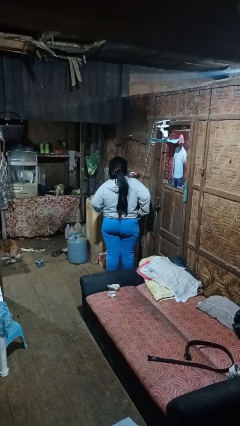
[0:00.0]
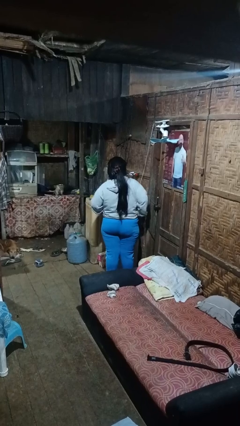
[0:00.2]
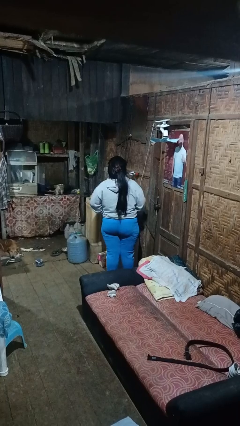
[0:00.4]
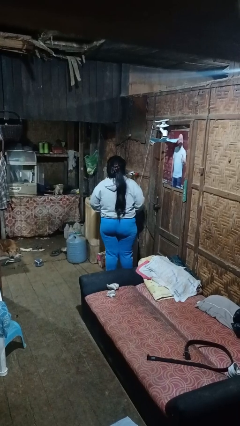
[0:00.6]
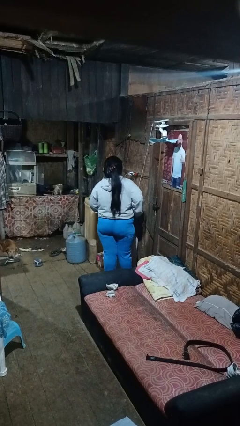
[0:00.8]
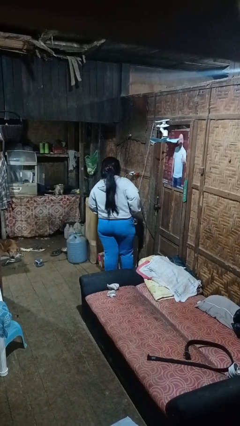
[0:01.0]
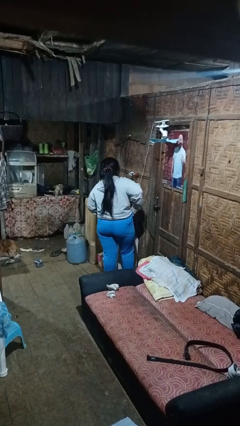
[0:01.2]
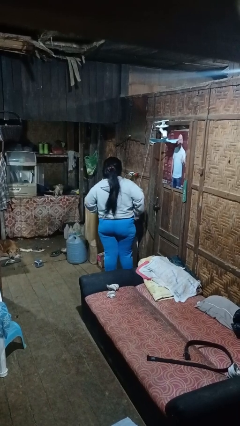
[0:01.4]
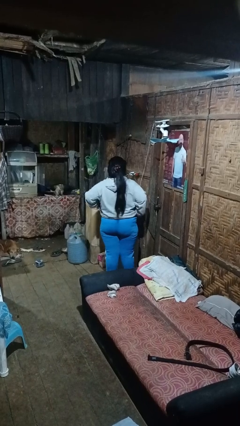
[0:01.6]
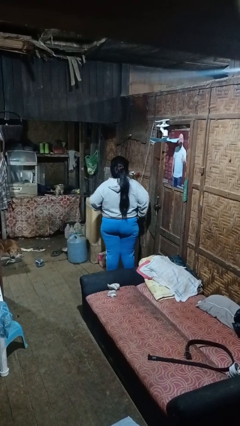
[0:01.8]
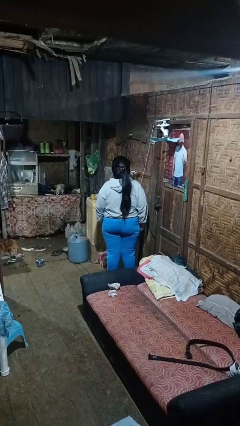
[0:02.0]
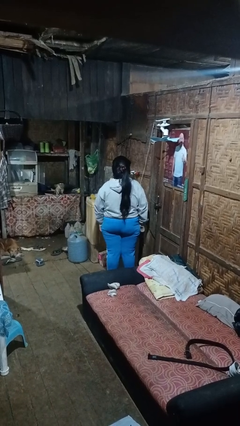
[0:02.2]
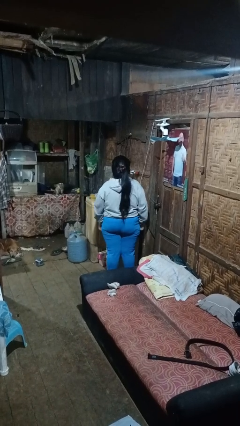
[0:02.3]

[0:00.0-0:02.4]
person hikes up pants

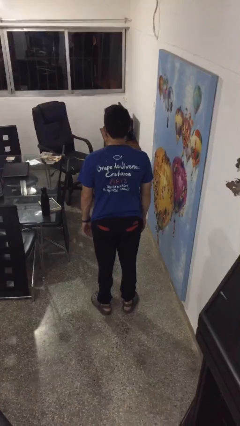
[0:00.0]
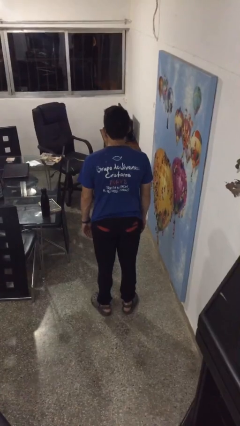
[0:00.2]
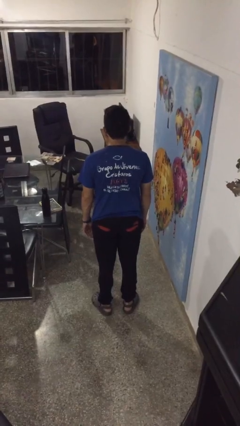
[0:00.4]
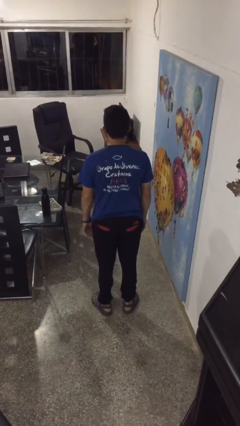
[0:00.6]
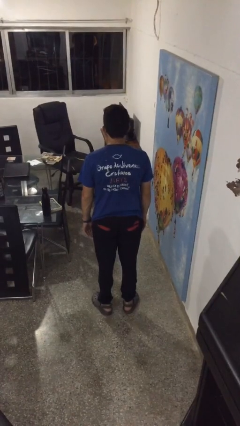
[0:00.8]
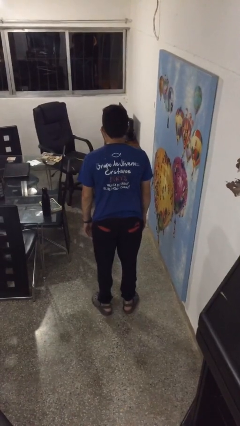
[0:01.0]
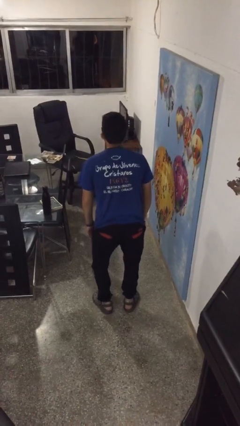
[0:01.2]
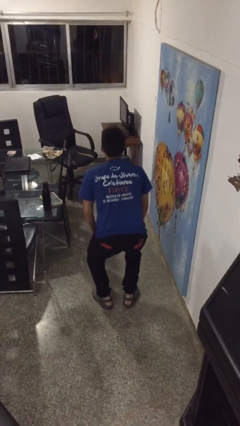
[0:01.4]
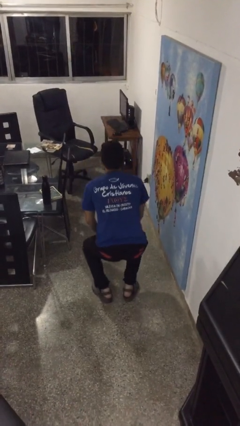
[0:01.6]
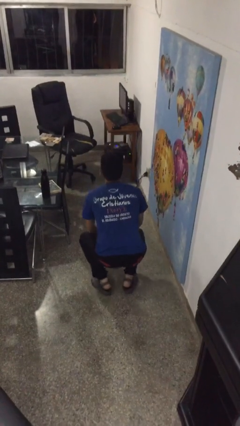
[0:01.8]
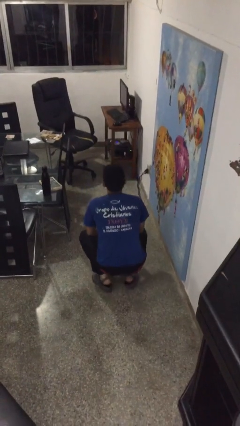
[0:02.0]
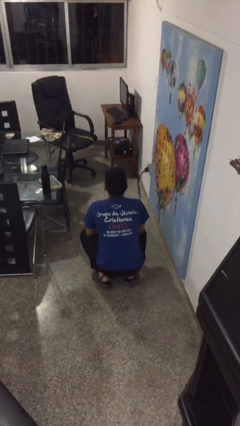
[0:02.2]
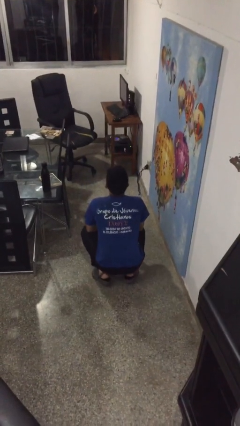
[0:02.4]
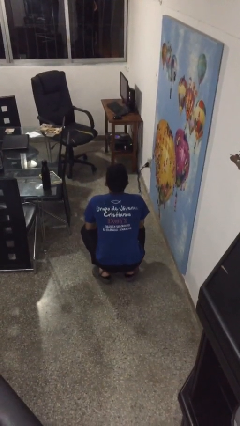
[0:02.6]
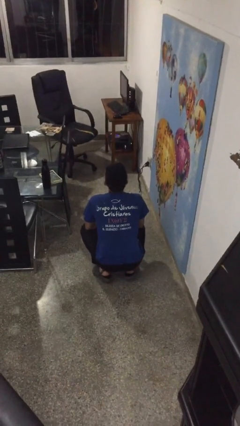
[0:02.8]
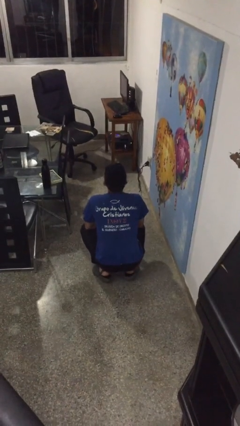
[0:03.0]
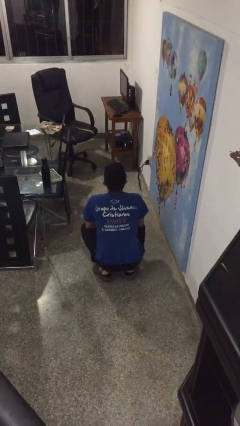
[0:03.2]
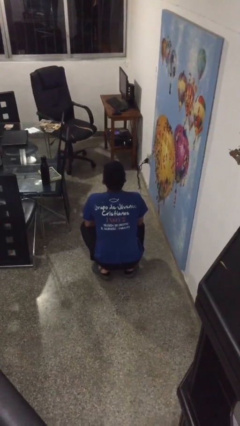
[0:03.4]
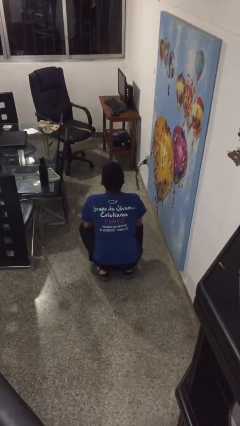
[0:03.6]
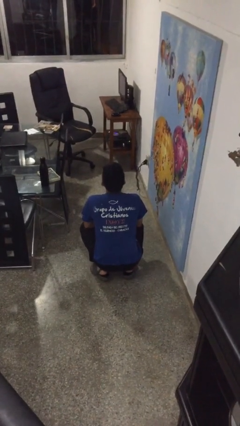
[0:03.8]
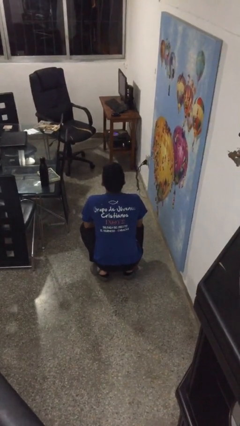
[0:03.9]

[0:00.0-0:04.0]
person squats

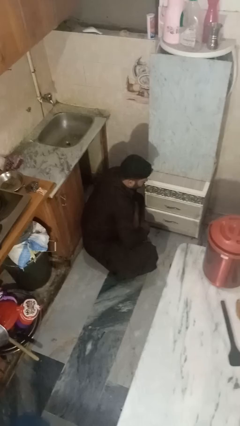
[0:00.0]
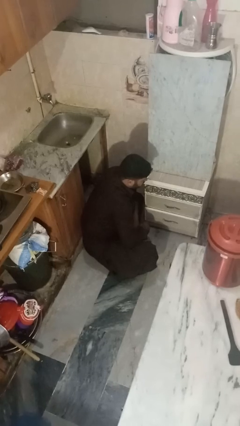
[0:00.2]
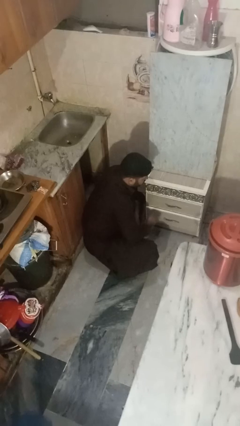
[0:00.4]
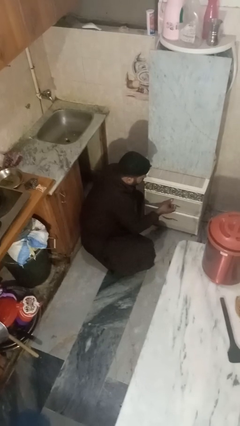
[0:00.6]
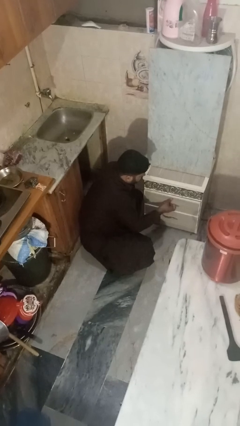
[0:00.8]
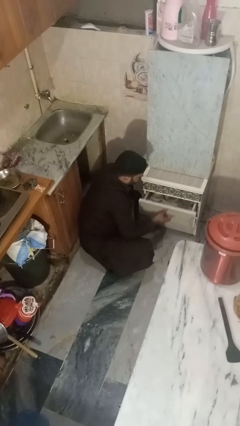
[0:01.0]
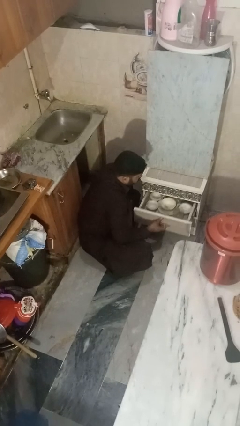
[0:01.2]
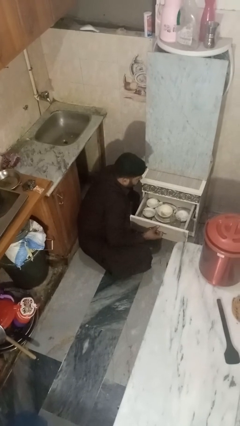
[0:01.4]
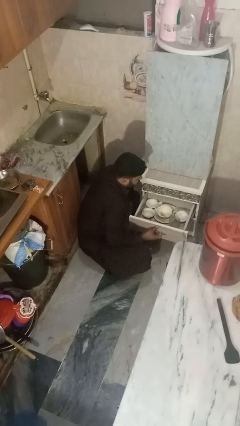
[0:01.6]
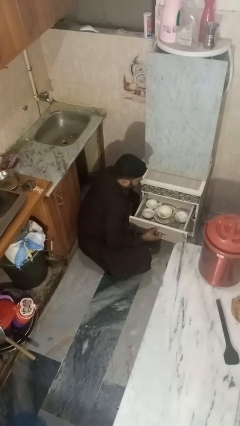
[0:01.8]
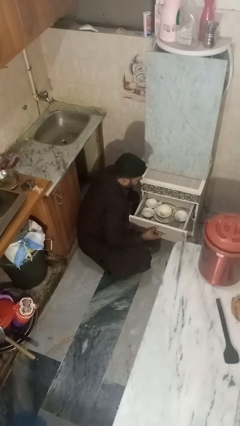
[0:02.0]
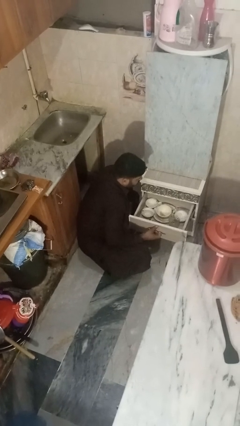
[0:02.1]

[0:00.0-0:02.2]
person opens kitchen drawer

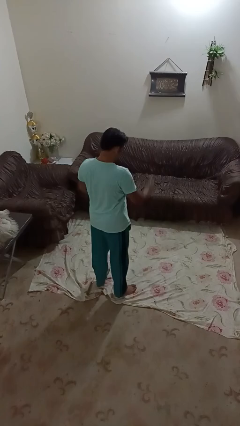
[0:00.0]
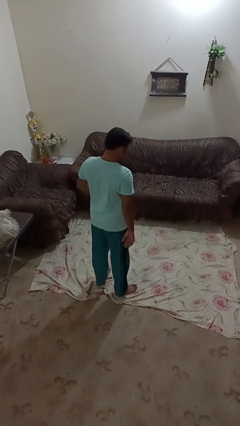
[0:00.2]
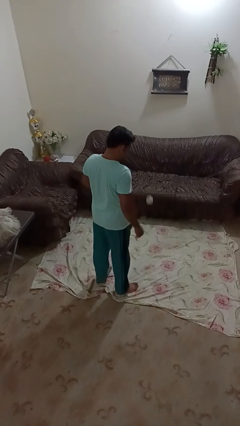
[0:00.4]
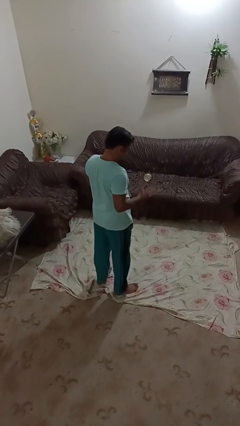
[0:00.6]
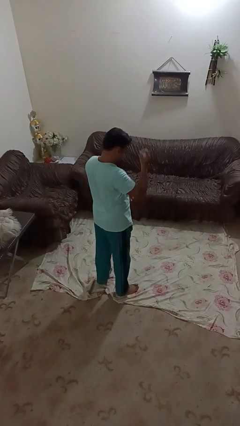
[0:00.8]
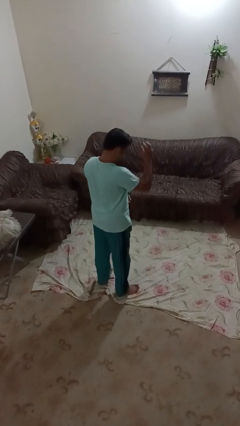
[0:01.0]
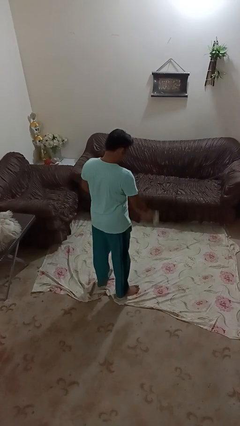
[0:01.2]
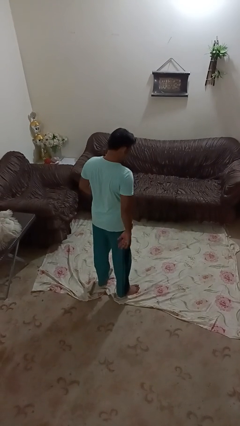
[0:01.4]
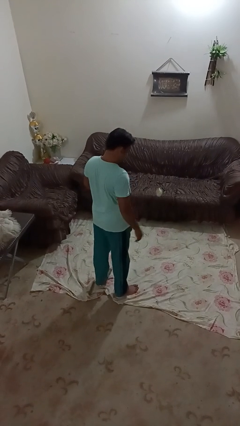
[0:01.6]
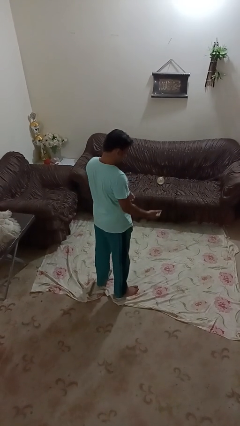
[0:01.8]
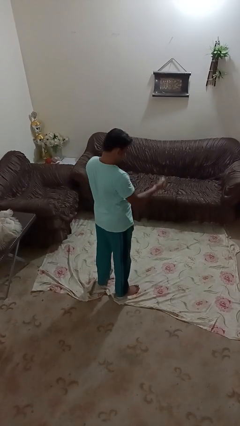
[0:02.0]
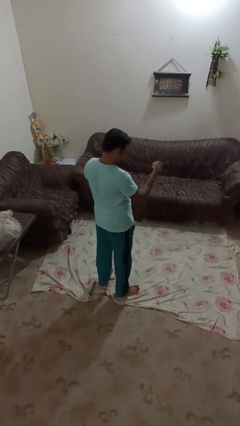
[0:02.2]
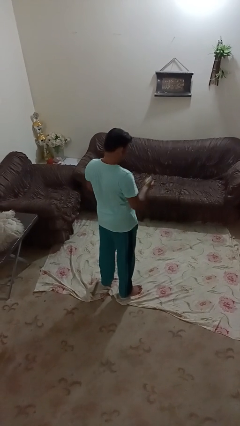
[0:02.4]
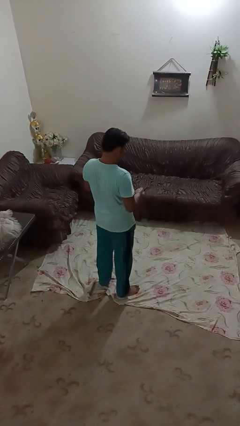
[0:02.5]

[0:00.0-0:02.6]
person bounces ball on floor

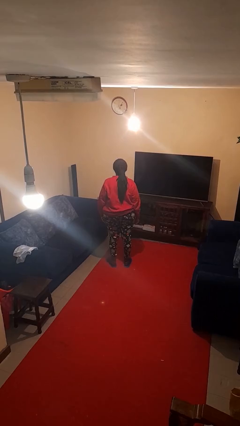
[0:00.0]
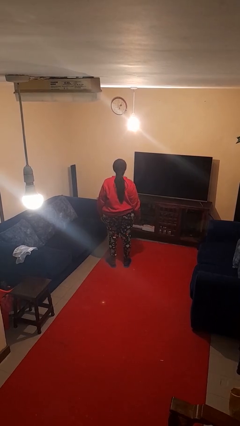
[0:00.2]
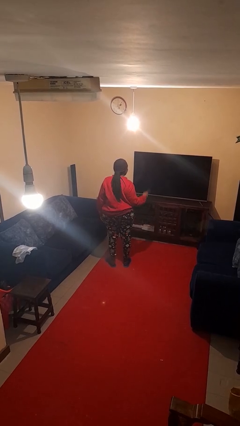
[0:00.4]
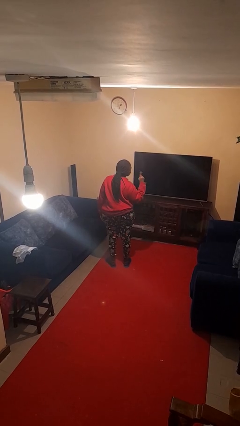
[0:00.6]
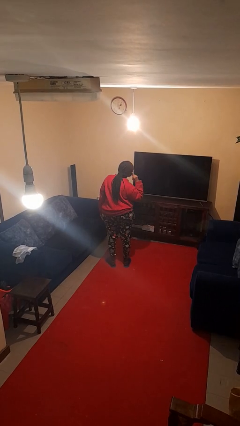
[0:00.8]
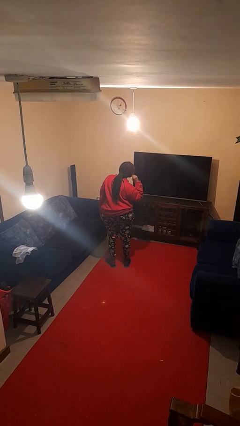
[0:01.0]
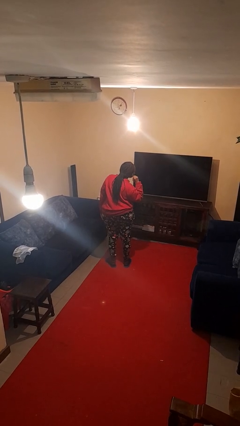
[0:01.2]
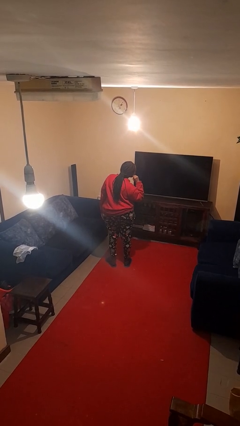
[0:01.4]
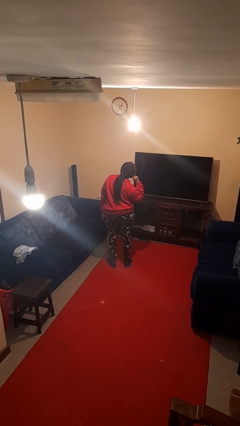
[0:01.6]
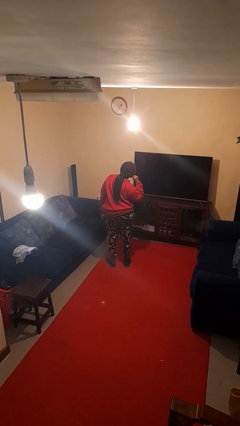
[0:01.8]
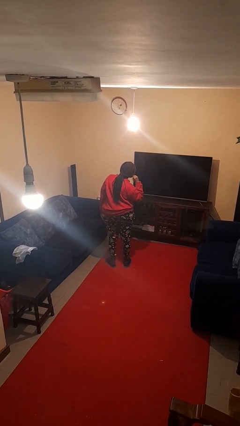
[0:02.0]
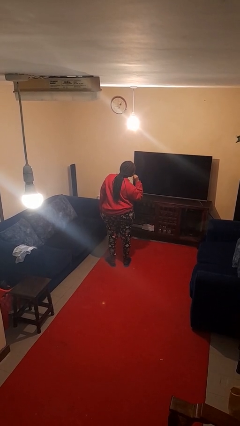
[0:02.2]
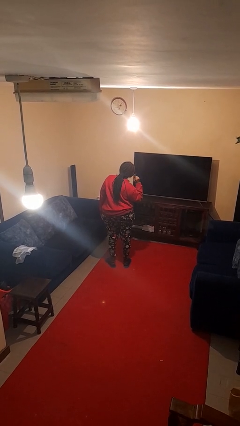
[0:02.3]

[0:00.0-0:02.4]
person gestures listen closely

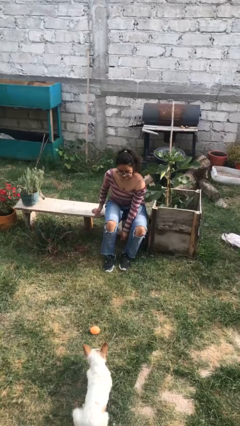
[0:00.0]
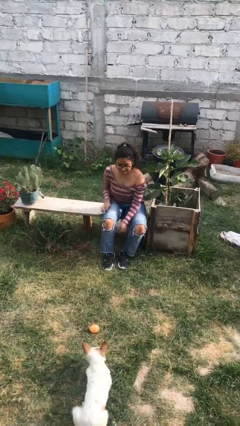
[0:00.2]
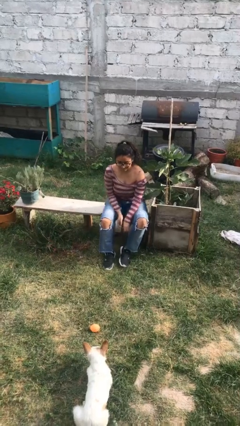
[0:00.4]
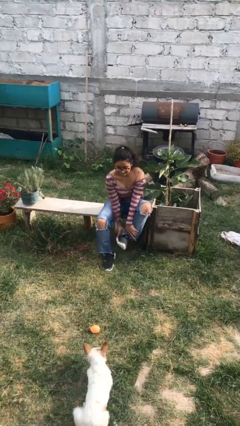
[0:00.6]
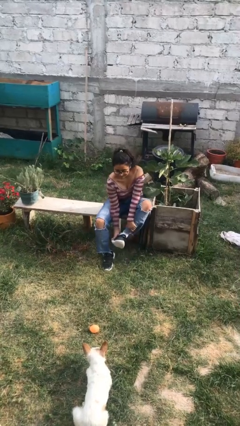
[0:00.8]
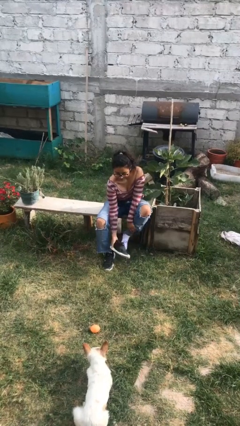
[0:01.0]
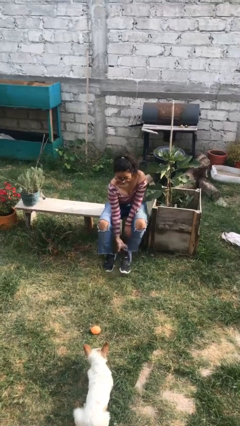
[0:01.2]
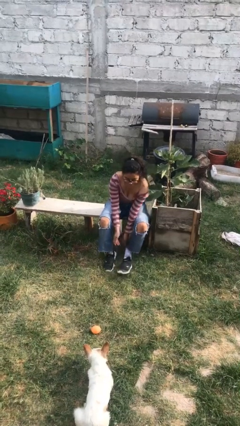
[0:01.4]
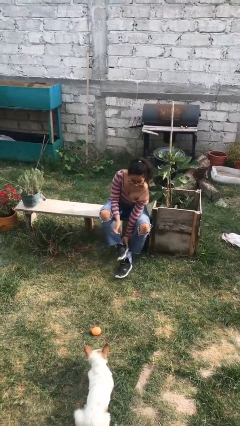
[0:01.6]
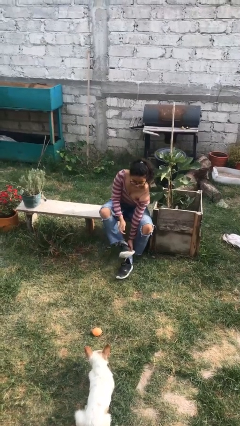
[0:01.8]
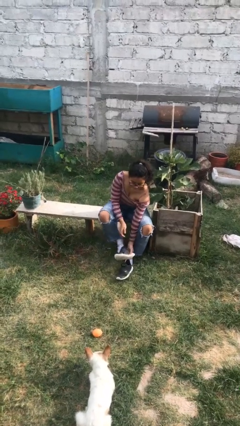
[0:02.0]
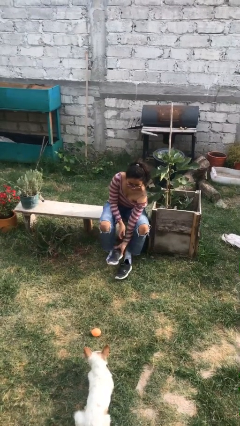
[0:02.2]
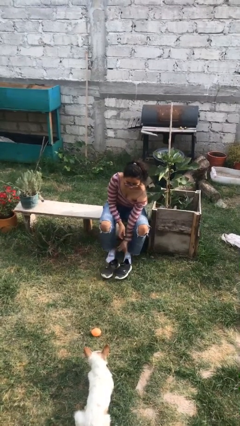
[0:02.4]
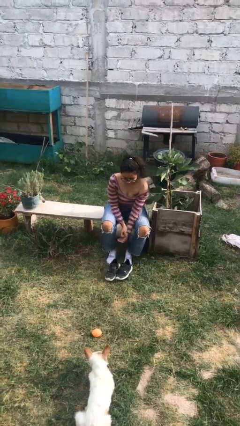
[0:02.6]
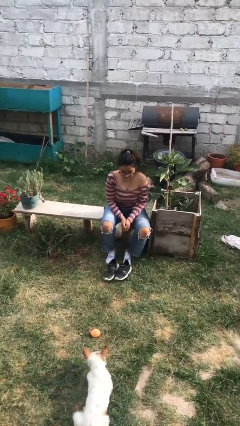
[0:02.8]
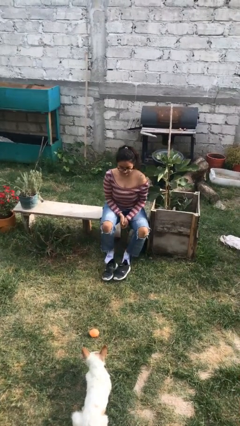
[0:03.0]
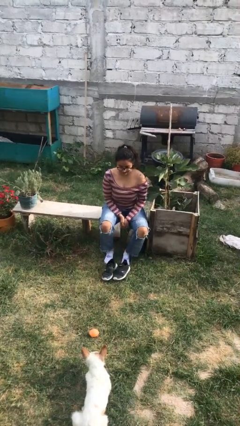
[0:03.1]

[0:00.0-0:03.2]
person takes off shoes

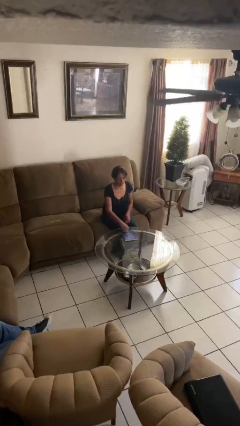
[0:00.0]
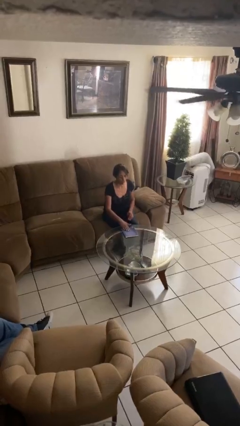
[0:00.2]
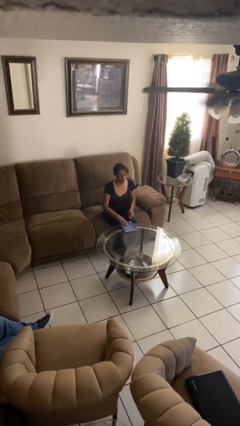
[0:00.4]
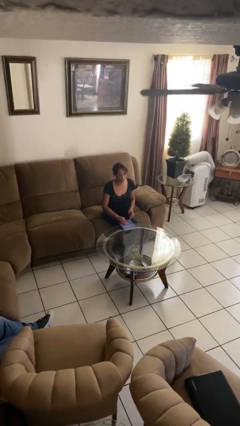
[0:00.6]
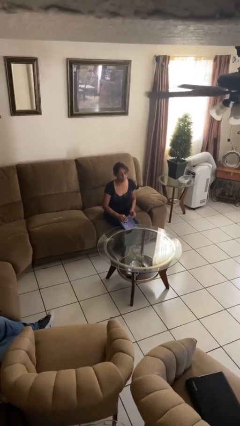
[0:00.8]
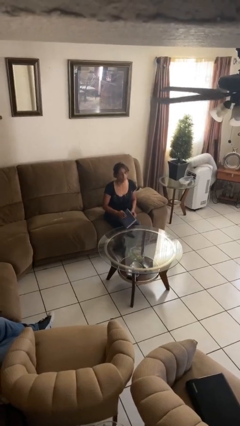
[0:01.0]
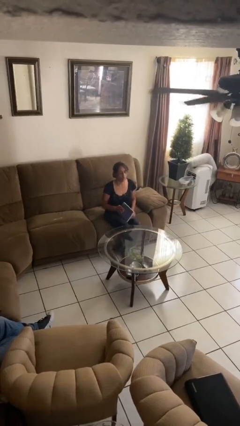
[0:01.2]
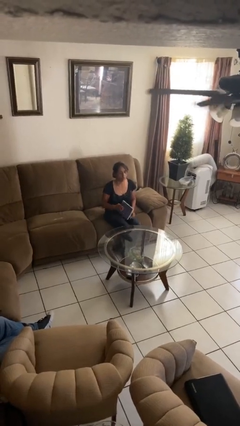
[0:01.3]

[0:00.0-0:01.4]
person picks up object from table
